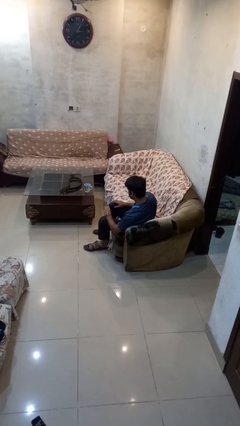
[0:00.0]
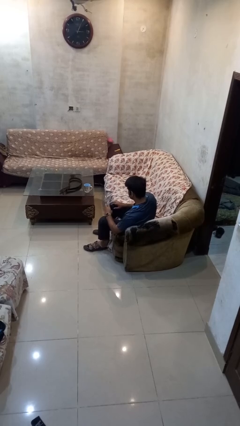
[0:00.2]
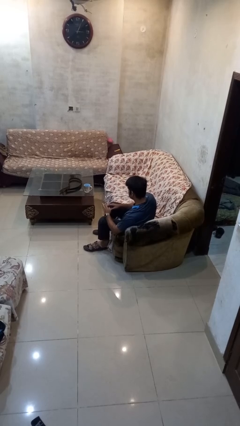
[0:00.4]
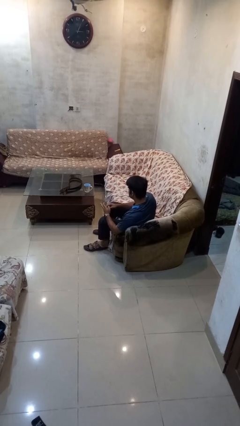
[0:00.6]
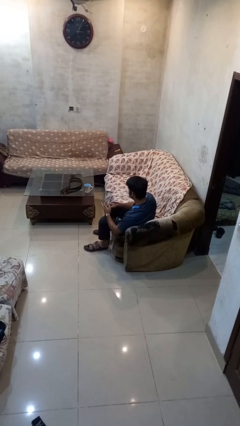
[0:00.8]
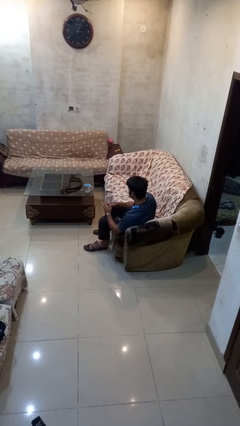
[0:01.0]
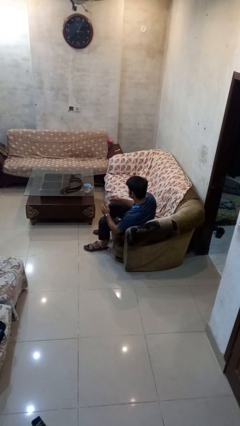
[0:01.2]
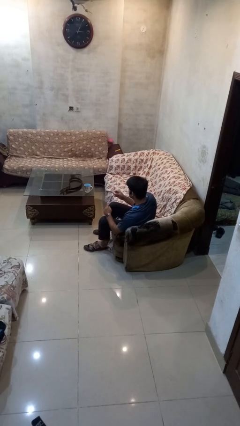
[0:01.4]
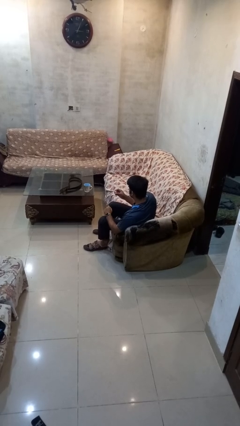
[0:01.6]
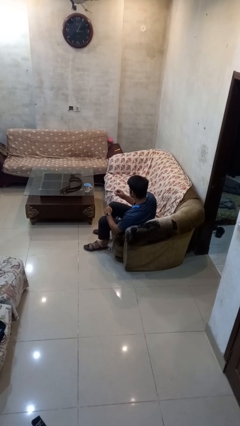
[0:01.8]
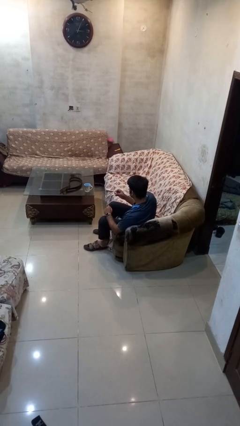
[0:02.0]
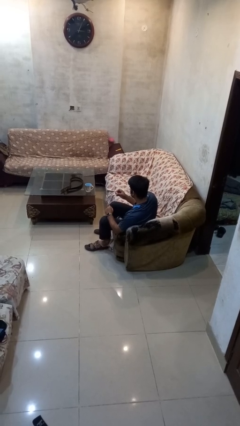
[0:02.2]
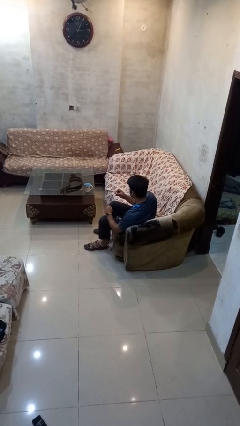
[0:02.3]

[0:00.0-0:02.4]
person takes off ring

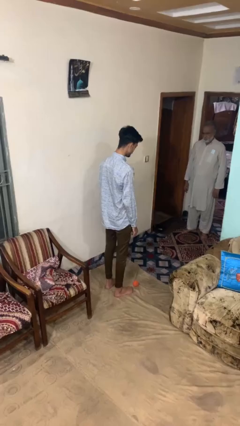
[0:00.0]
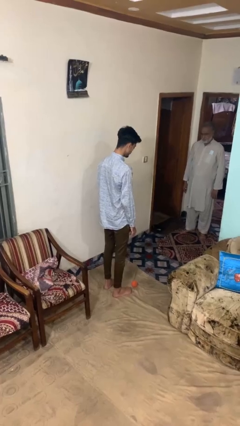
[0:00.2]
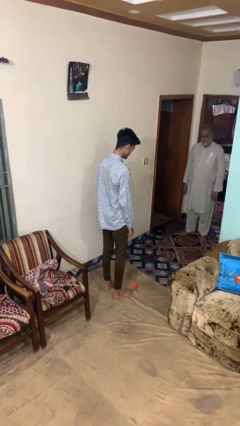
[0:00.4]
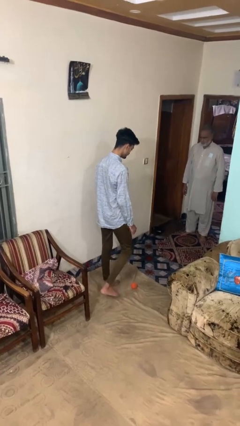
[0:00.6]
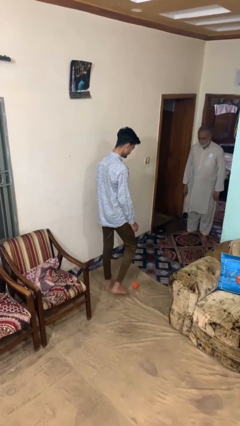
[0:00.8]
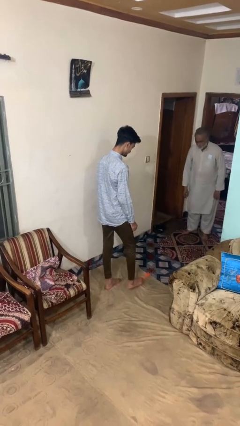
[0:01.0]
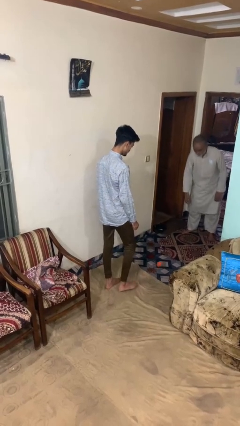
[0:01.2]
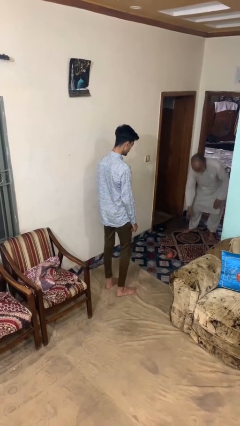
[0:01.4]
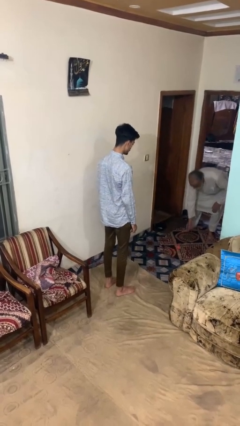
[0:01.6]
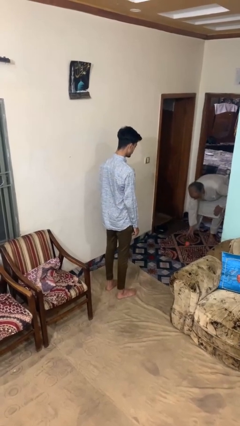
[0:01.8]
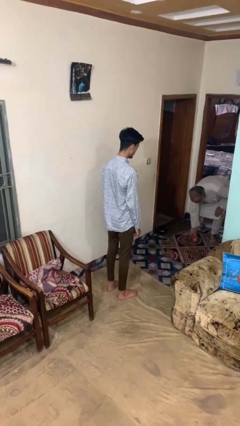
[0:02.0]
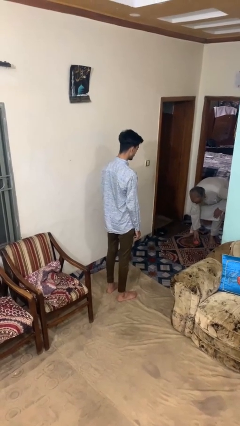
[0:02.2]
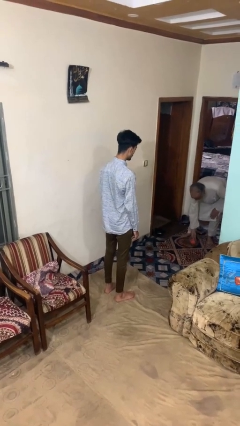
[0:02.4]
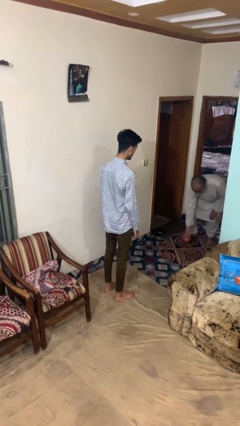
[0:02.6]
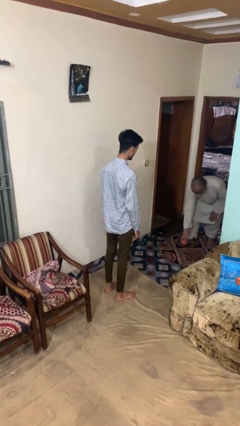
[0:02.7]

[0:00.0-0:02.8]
person kicks object to person

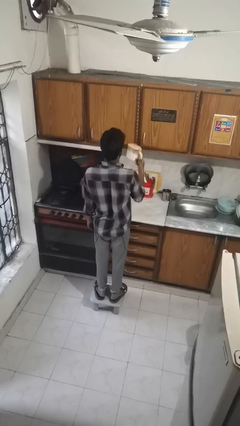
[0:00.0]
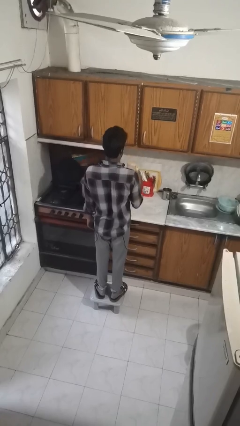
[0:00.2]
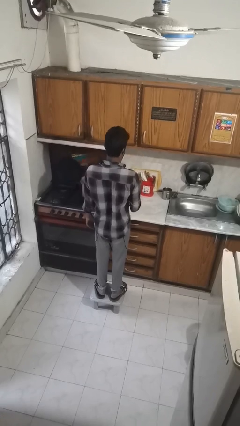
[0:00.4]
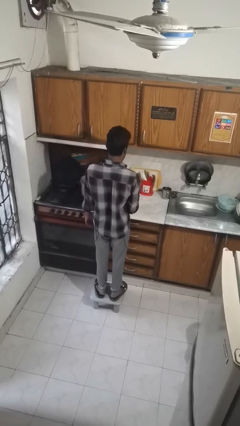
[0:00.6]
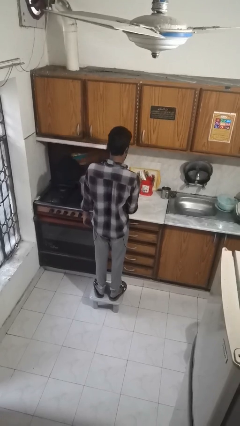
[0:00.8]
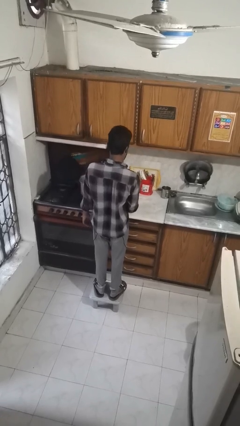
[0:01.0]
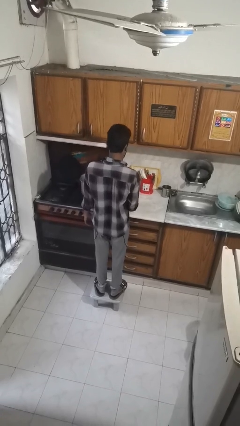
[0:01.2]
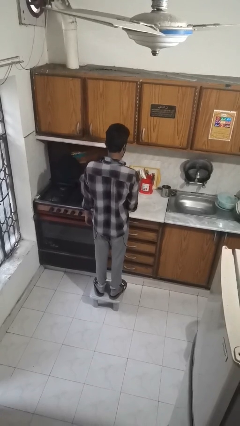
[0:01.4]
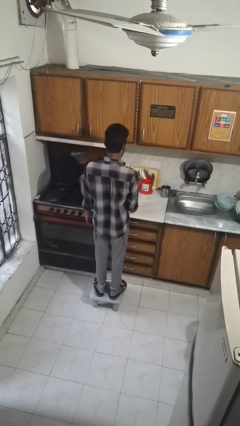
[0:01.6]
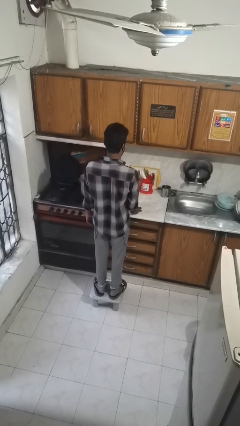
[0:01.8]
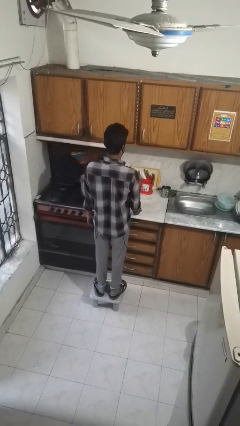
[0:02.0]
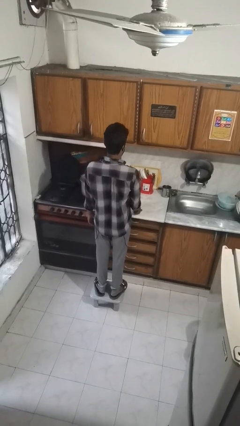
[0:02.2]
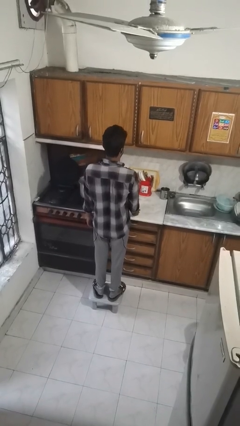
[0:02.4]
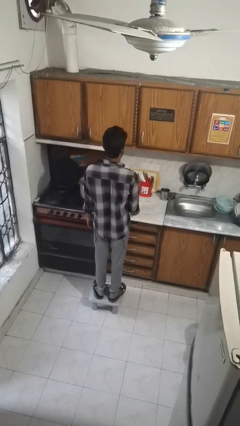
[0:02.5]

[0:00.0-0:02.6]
person puts down object on shelf

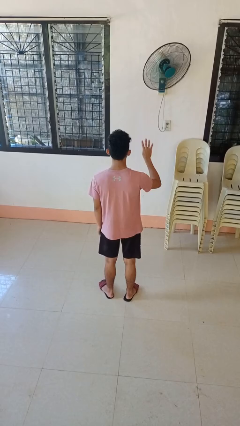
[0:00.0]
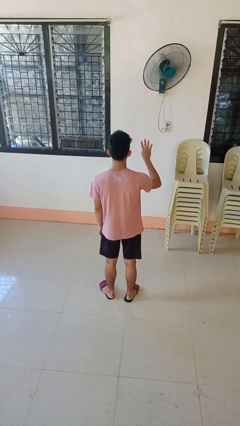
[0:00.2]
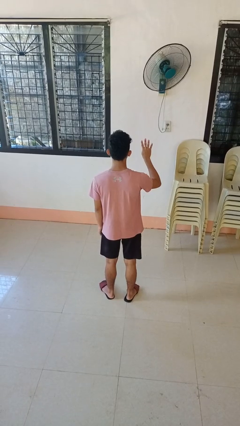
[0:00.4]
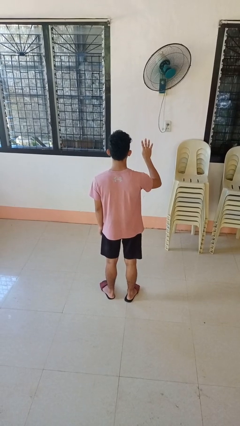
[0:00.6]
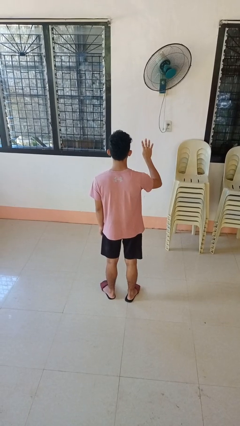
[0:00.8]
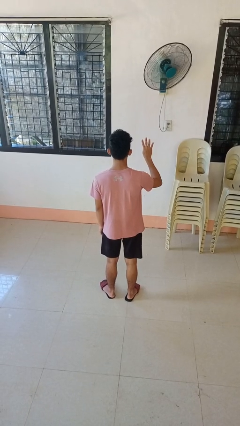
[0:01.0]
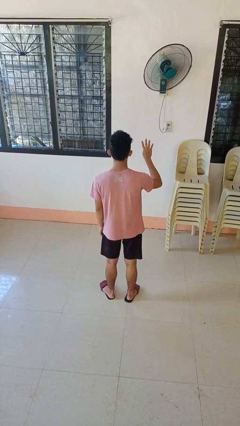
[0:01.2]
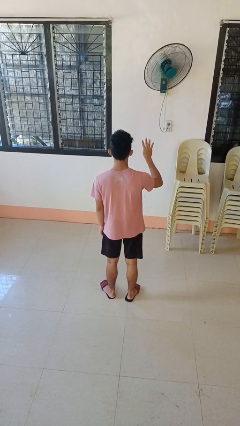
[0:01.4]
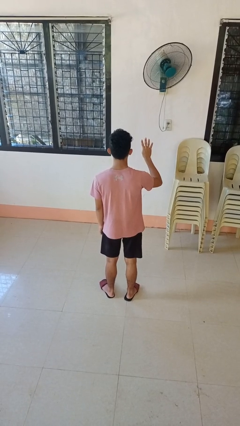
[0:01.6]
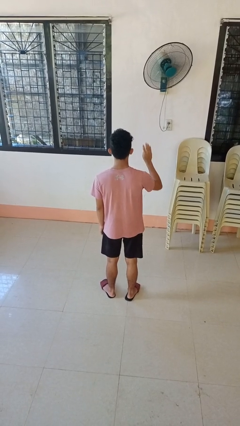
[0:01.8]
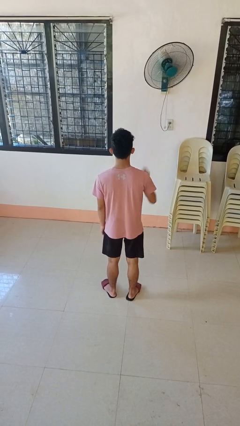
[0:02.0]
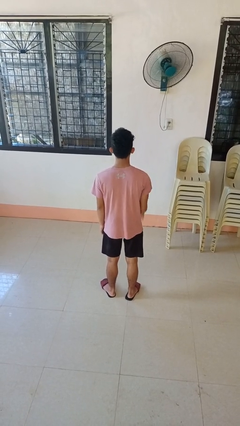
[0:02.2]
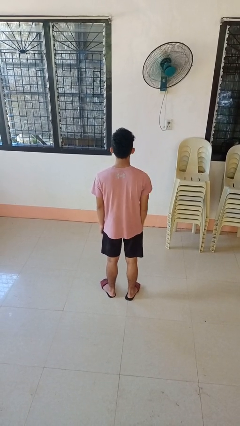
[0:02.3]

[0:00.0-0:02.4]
person gestures number four

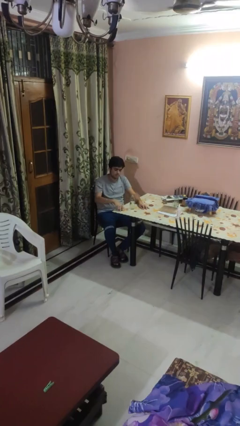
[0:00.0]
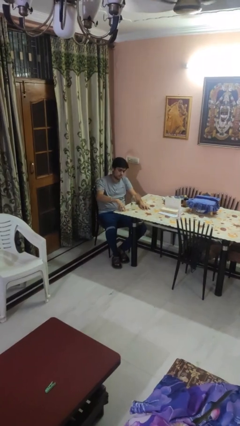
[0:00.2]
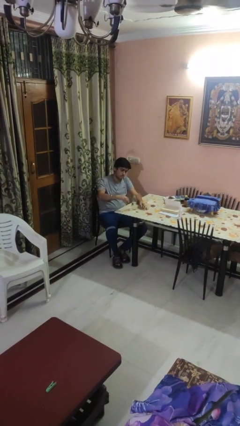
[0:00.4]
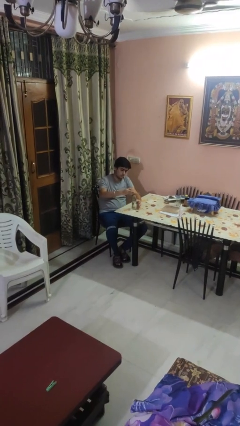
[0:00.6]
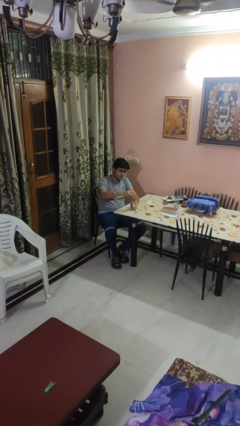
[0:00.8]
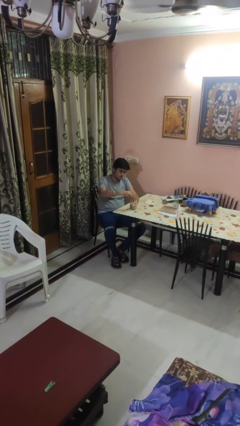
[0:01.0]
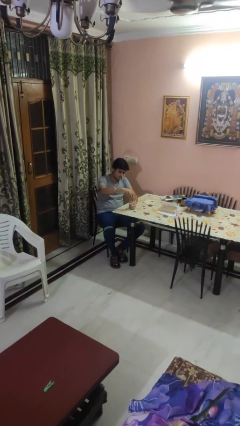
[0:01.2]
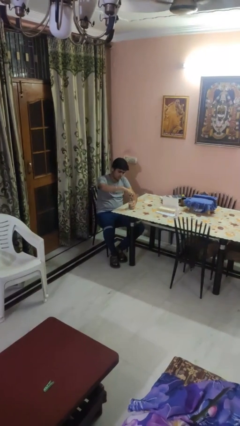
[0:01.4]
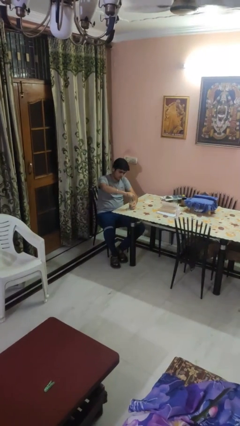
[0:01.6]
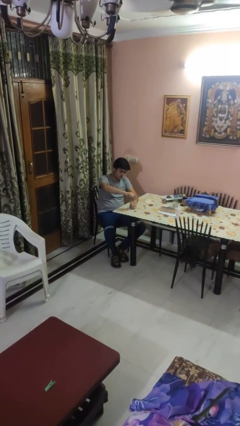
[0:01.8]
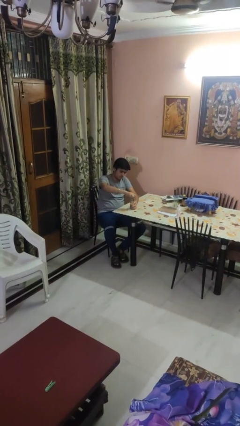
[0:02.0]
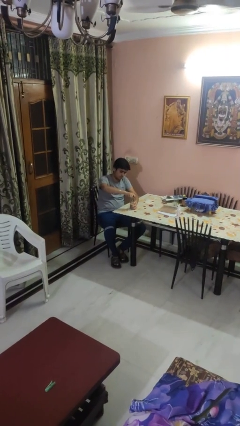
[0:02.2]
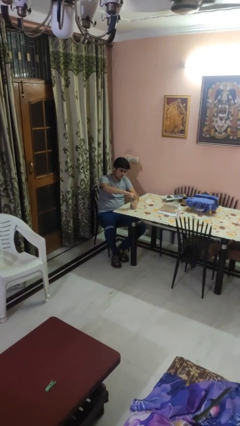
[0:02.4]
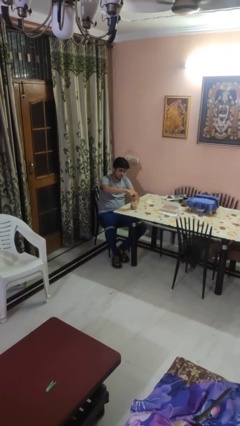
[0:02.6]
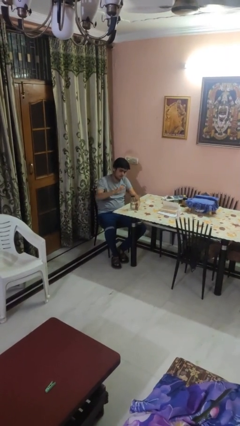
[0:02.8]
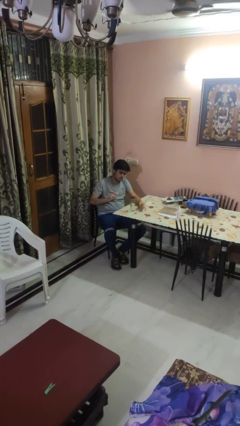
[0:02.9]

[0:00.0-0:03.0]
person screws lid to bottle

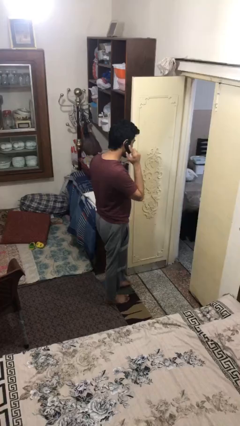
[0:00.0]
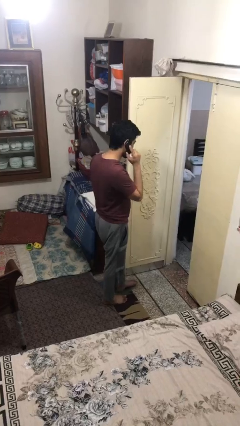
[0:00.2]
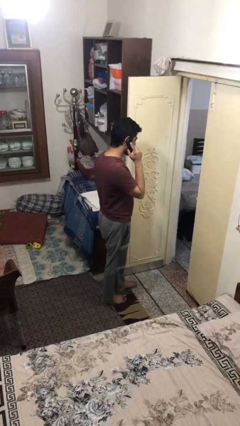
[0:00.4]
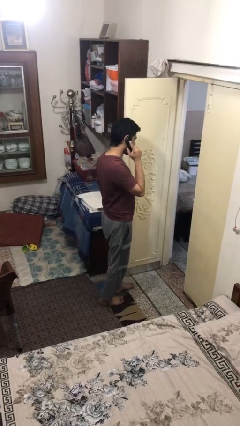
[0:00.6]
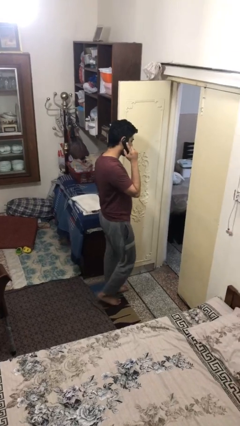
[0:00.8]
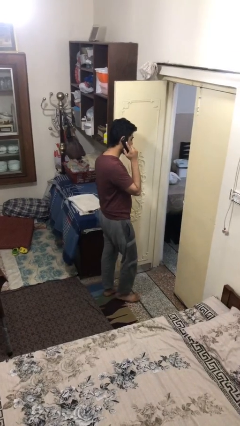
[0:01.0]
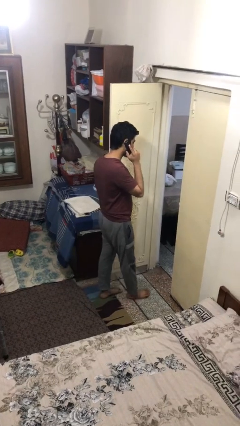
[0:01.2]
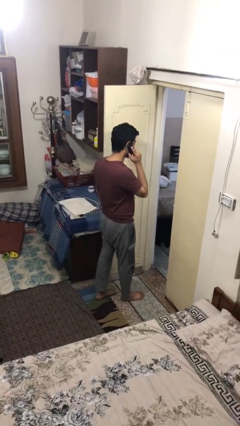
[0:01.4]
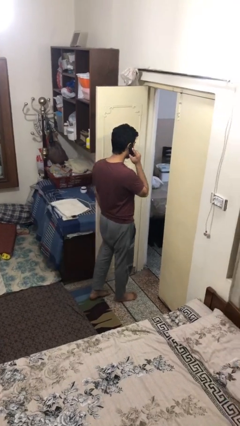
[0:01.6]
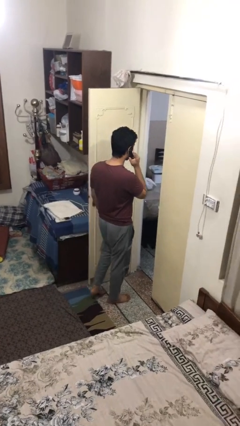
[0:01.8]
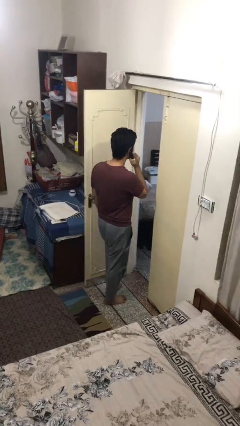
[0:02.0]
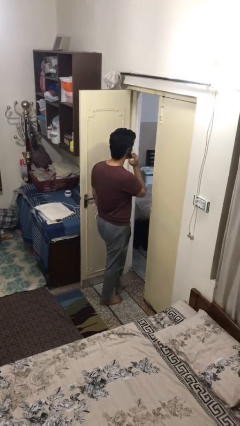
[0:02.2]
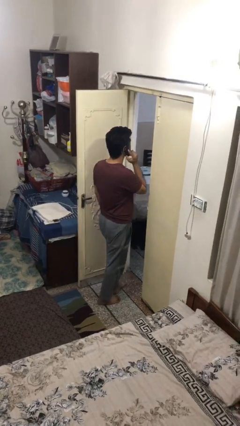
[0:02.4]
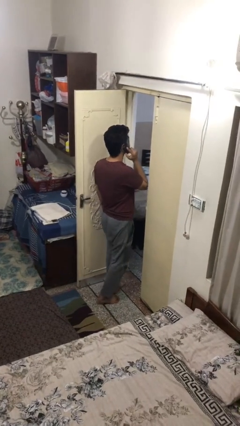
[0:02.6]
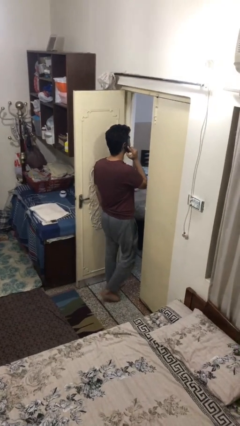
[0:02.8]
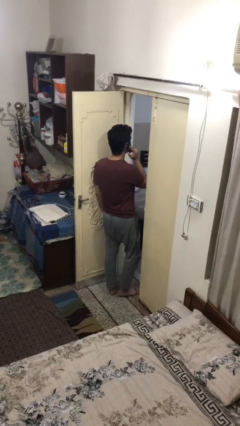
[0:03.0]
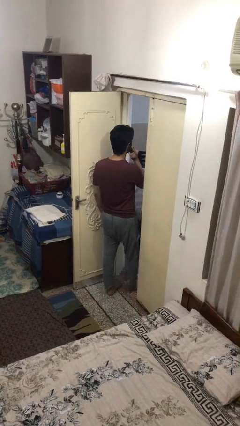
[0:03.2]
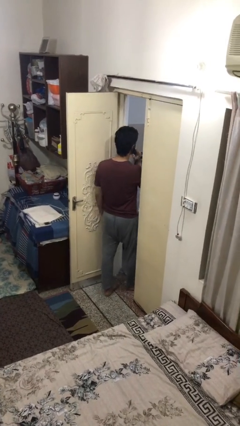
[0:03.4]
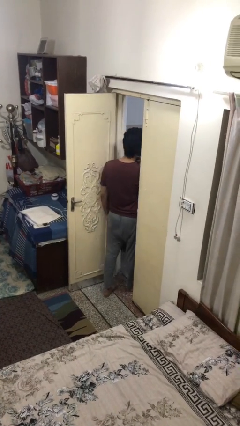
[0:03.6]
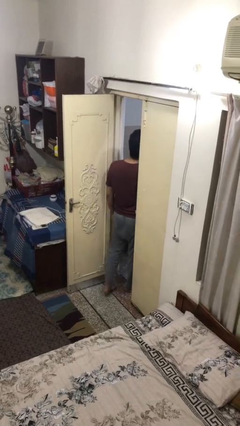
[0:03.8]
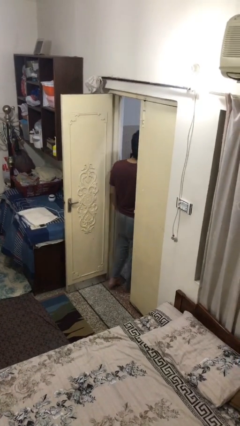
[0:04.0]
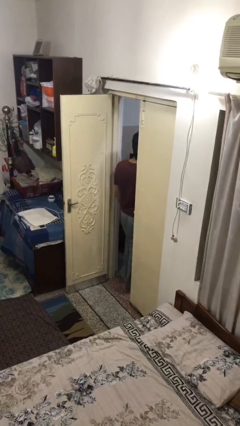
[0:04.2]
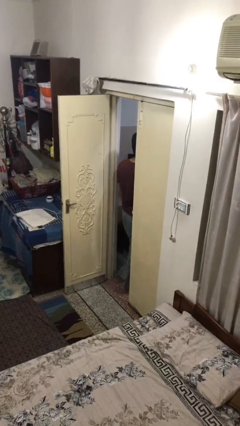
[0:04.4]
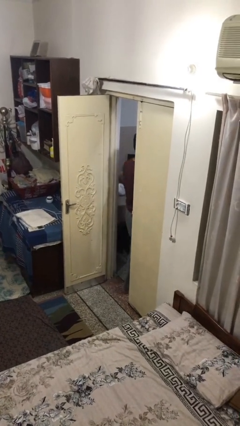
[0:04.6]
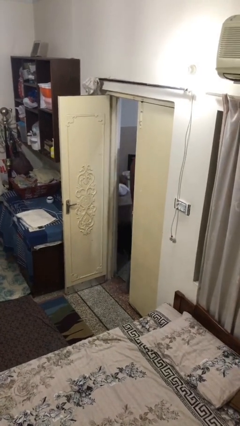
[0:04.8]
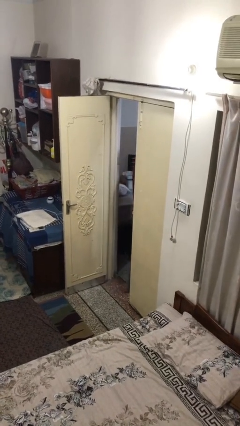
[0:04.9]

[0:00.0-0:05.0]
person exits scene through structure
